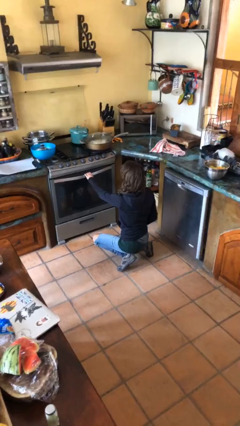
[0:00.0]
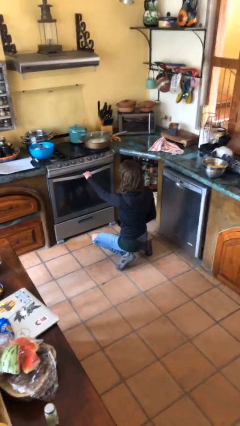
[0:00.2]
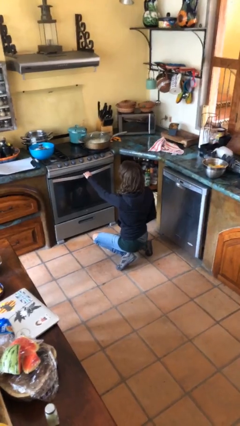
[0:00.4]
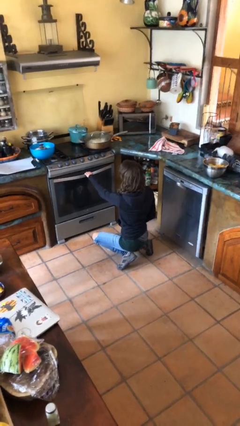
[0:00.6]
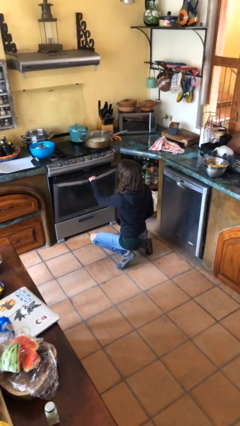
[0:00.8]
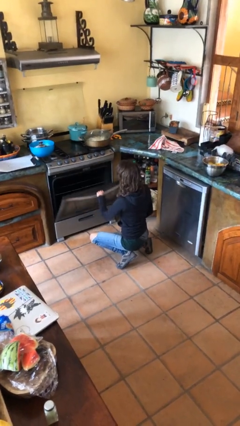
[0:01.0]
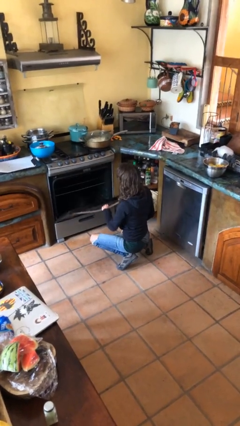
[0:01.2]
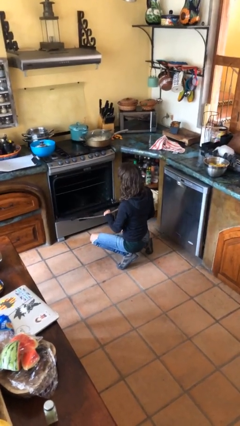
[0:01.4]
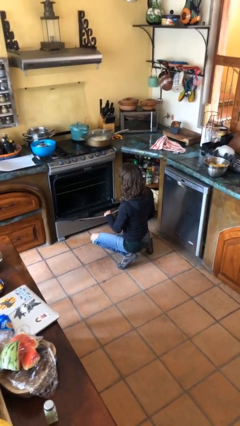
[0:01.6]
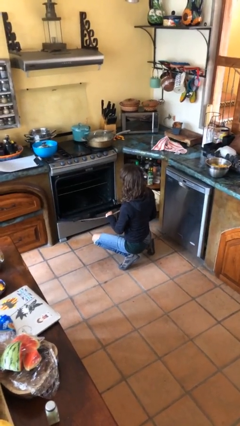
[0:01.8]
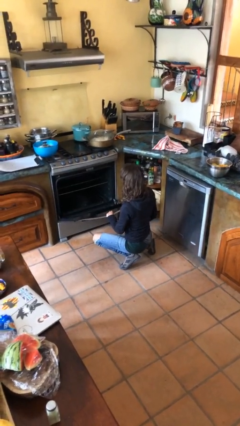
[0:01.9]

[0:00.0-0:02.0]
person opens oven door

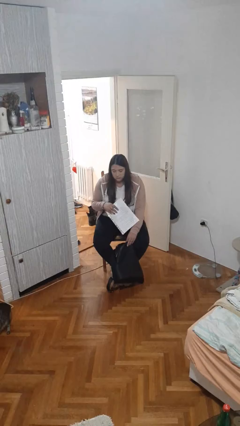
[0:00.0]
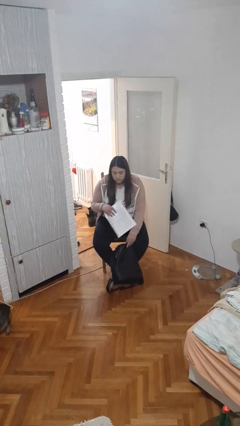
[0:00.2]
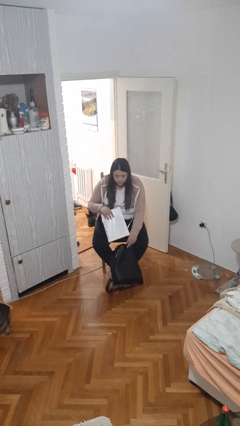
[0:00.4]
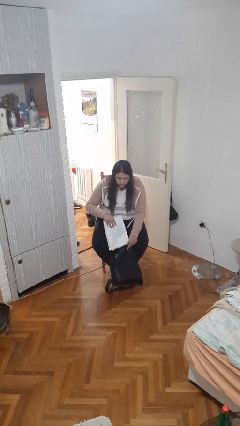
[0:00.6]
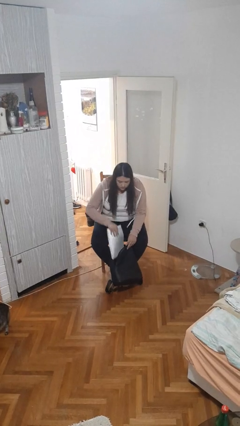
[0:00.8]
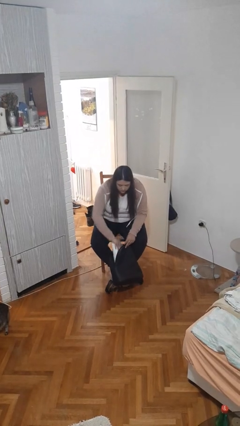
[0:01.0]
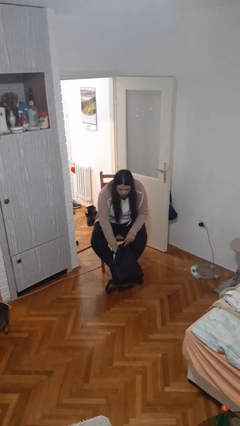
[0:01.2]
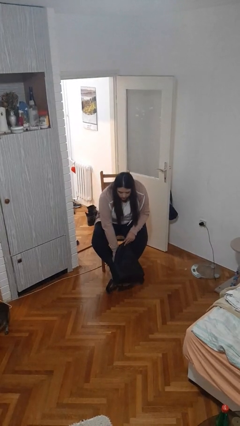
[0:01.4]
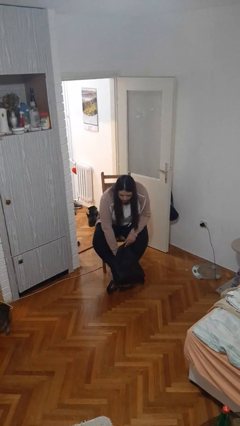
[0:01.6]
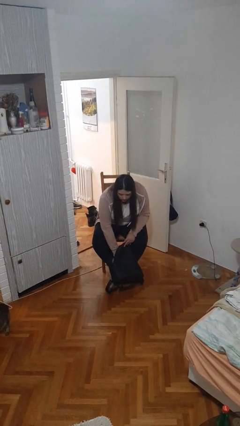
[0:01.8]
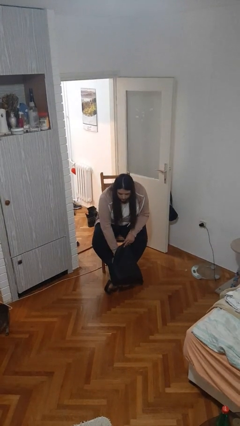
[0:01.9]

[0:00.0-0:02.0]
person puts object into backpack

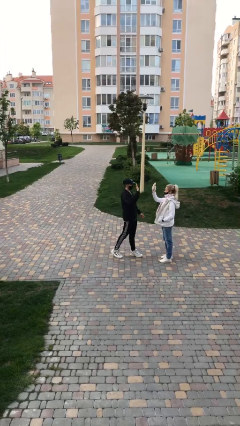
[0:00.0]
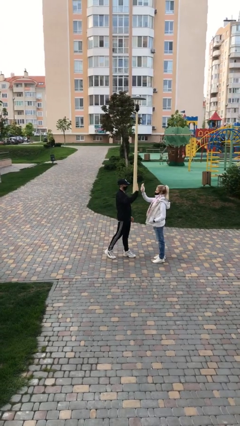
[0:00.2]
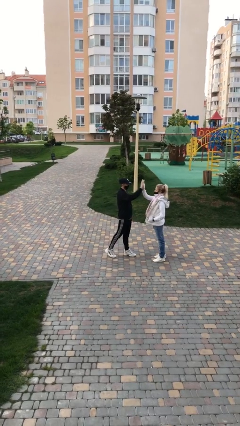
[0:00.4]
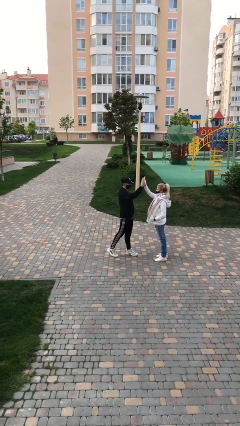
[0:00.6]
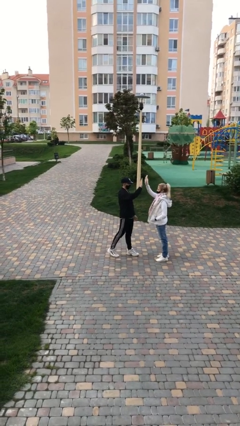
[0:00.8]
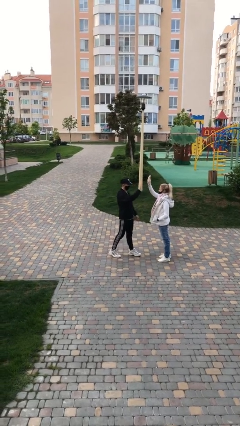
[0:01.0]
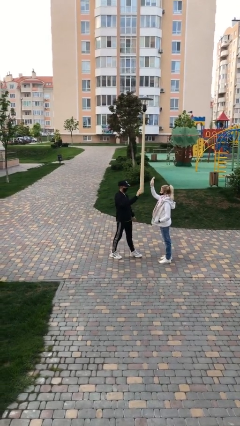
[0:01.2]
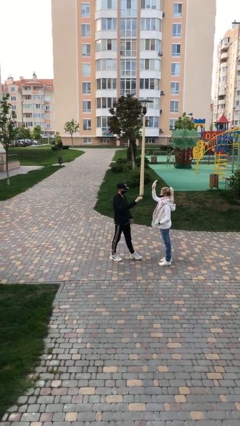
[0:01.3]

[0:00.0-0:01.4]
person highfives hand

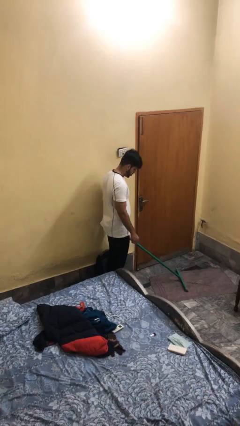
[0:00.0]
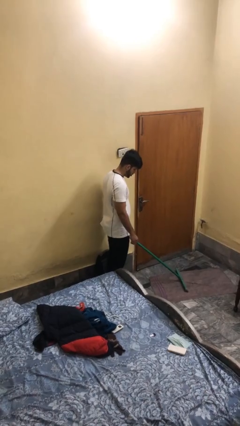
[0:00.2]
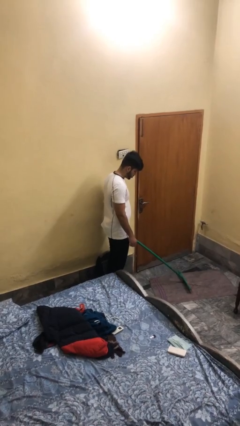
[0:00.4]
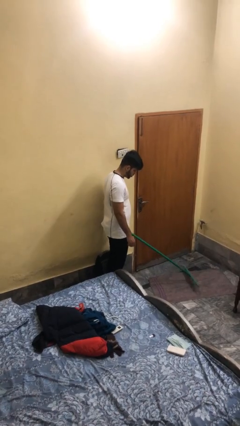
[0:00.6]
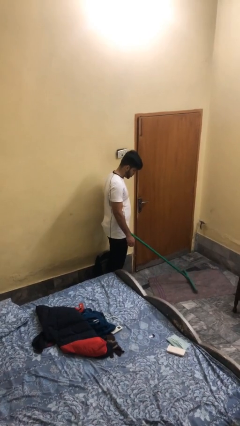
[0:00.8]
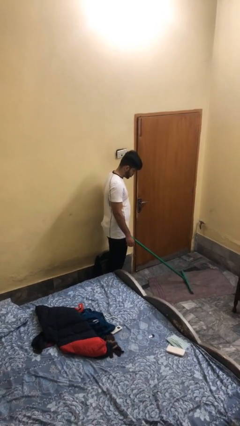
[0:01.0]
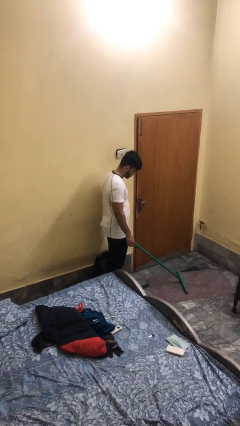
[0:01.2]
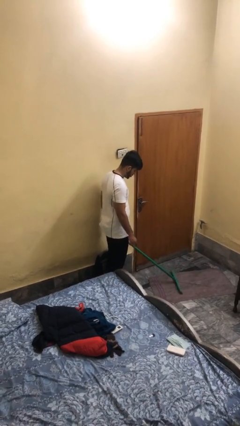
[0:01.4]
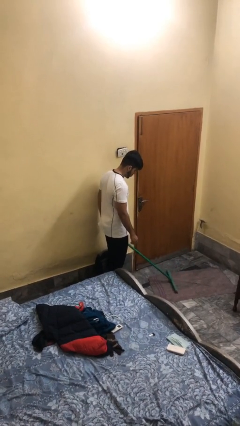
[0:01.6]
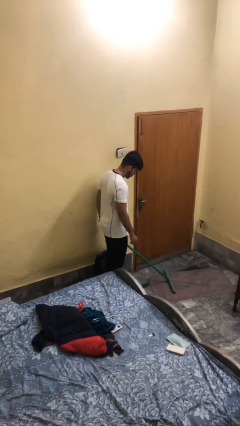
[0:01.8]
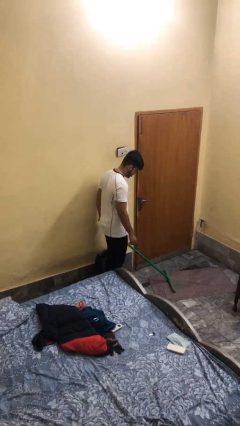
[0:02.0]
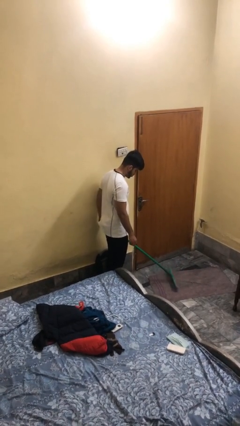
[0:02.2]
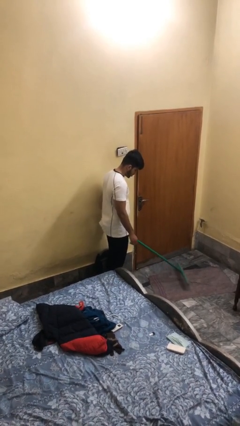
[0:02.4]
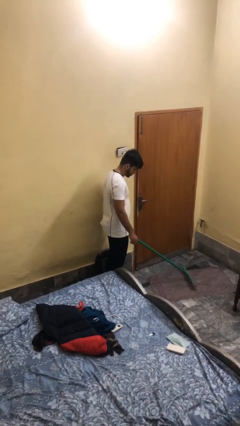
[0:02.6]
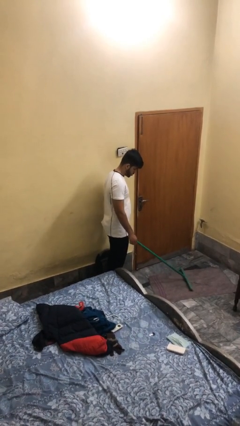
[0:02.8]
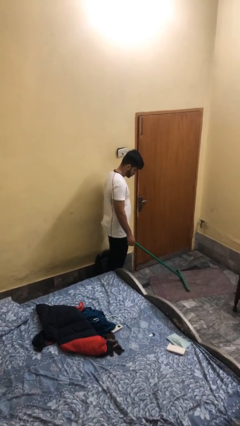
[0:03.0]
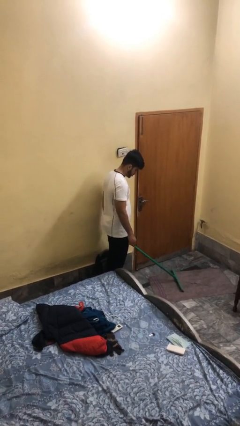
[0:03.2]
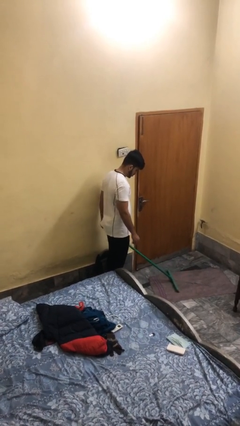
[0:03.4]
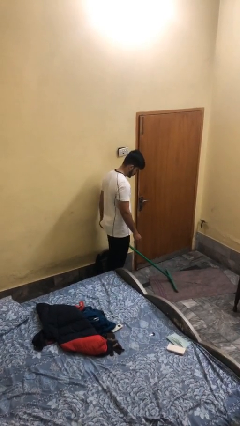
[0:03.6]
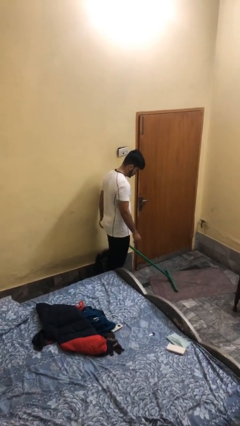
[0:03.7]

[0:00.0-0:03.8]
person vacuums carpet

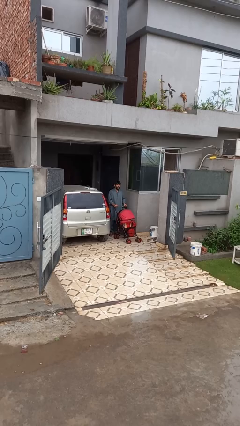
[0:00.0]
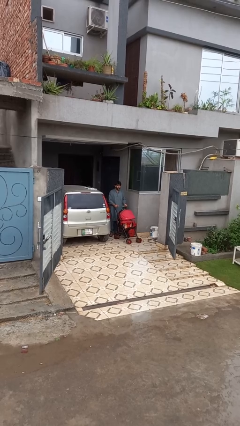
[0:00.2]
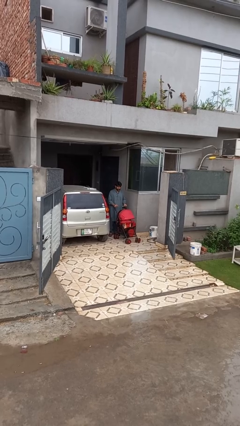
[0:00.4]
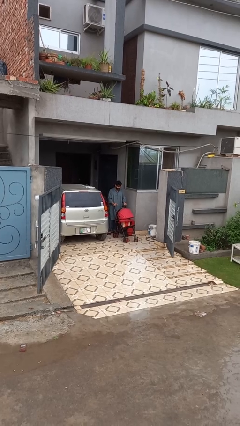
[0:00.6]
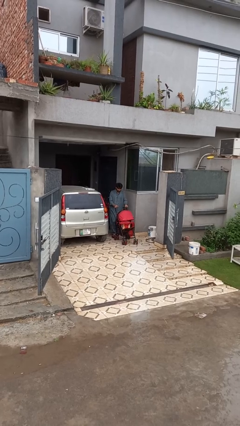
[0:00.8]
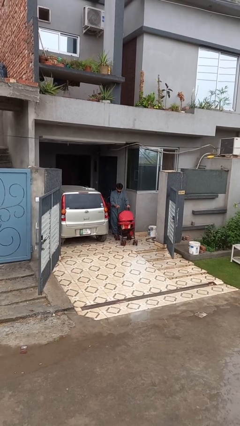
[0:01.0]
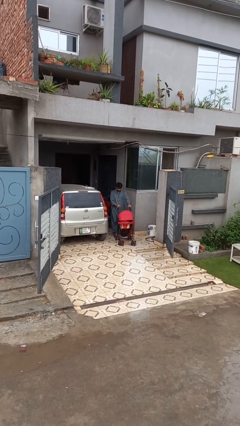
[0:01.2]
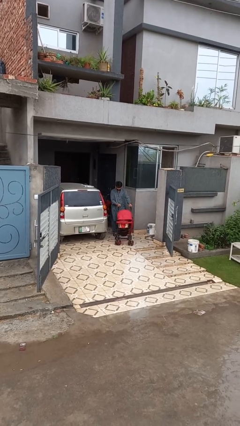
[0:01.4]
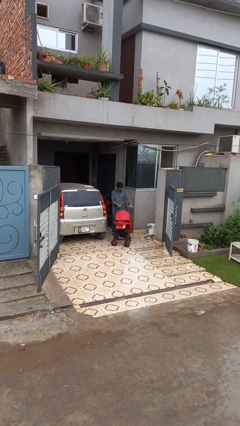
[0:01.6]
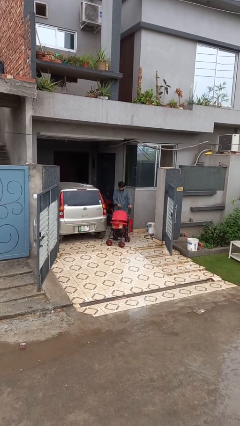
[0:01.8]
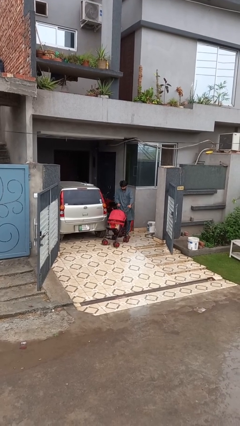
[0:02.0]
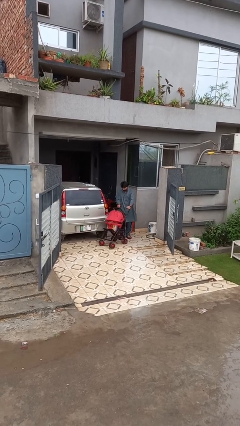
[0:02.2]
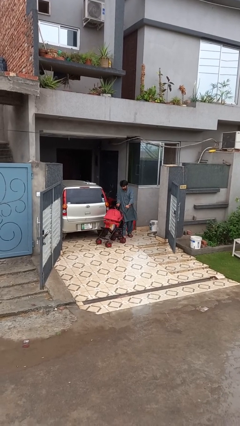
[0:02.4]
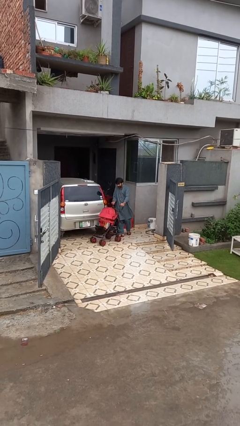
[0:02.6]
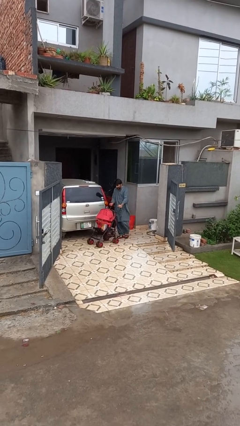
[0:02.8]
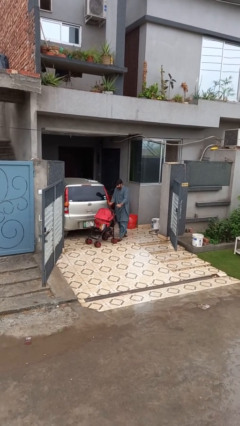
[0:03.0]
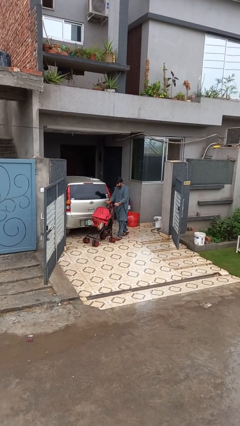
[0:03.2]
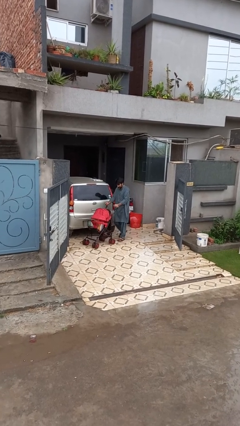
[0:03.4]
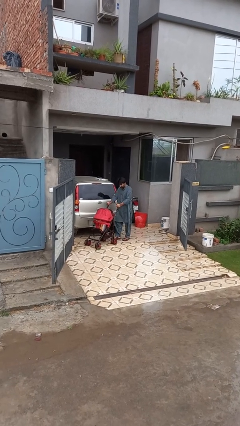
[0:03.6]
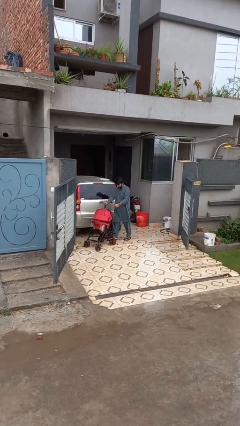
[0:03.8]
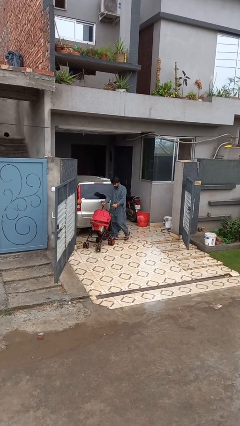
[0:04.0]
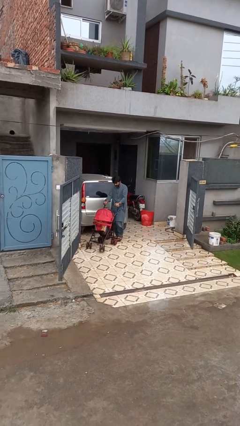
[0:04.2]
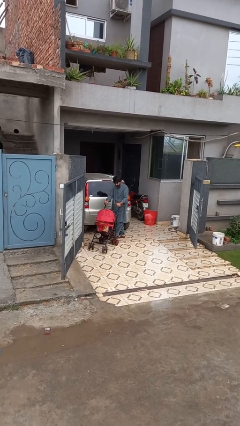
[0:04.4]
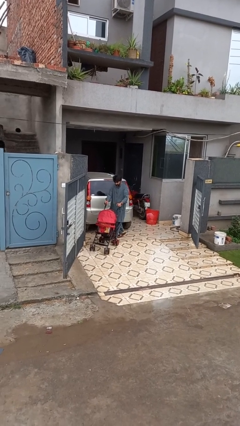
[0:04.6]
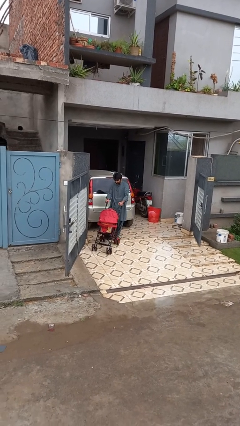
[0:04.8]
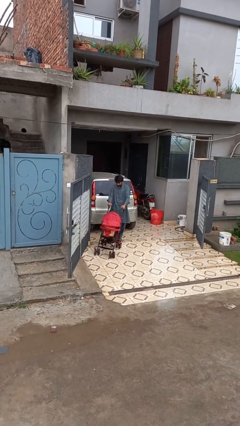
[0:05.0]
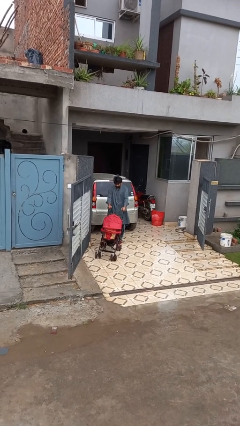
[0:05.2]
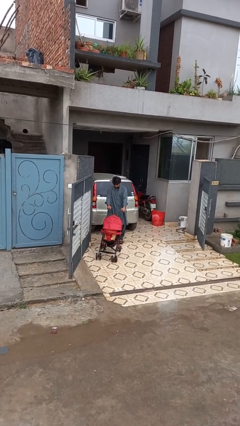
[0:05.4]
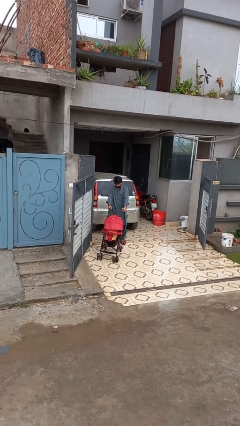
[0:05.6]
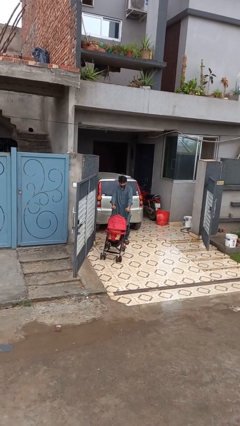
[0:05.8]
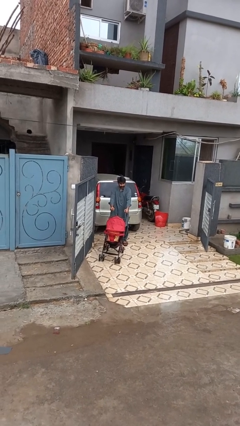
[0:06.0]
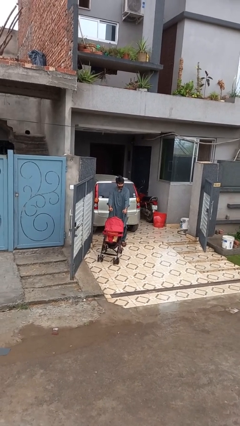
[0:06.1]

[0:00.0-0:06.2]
person pushes wheeled cart

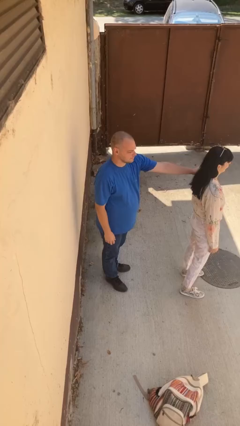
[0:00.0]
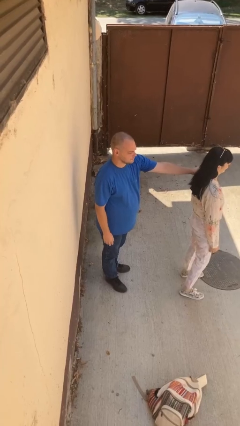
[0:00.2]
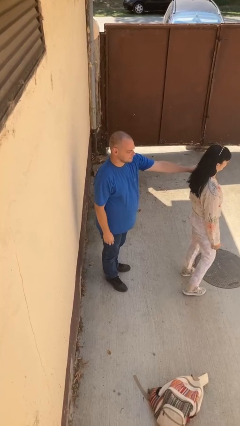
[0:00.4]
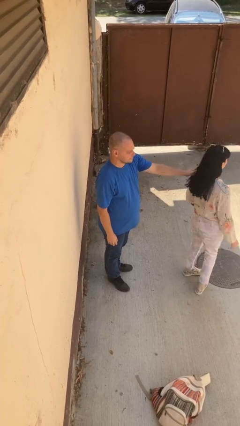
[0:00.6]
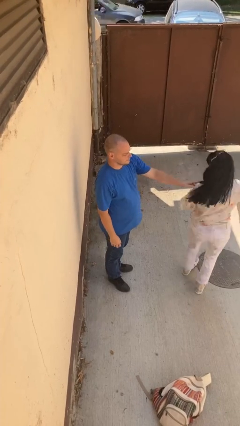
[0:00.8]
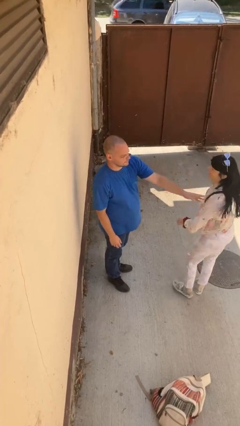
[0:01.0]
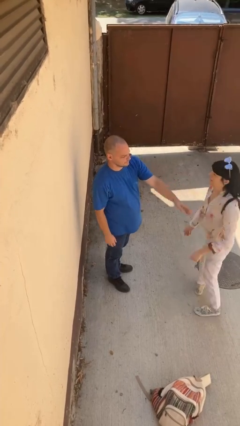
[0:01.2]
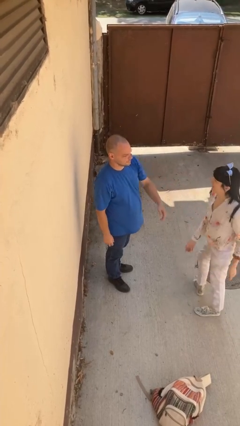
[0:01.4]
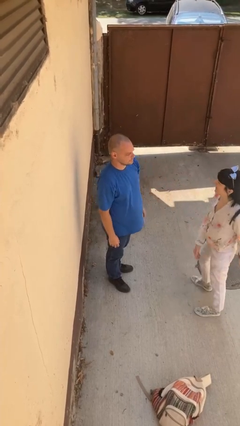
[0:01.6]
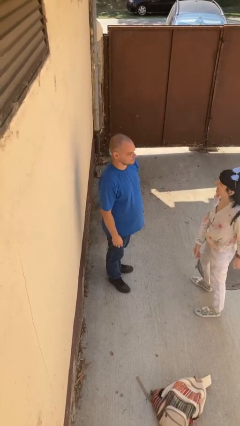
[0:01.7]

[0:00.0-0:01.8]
person spins person around

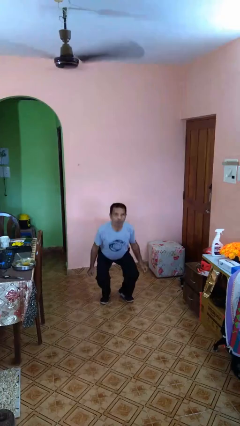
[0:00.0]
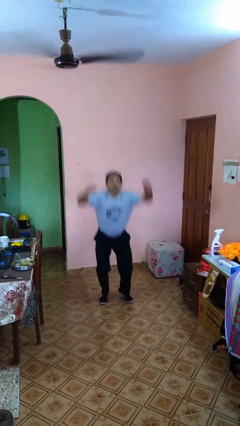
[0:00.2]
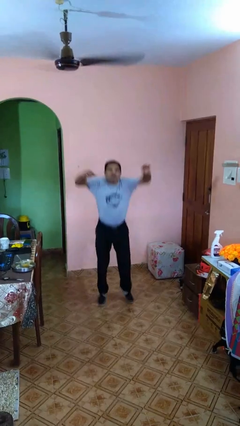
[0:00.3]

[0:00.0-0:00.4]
person jumps
